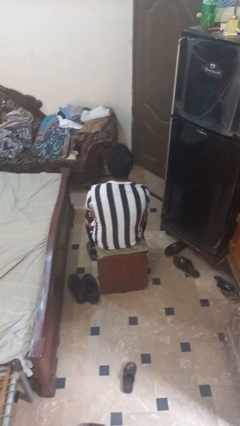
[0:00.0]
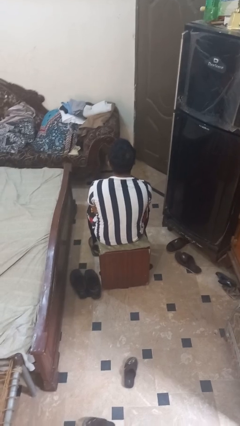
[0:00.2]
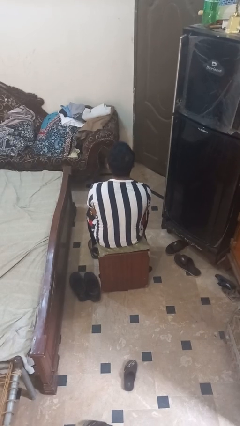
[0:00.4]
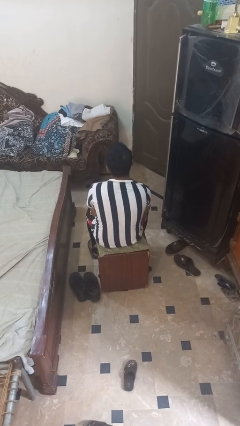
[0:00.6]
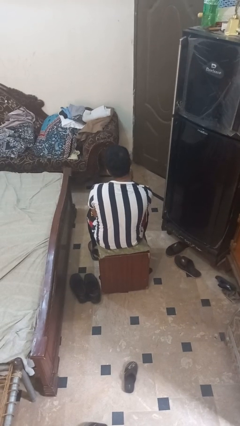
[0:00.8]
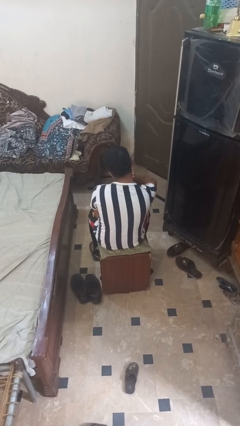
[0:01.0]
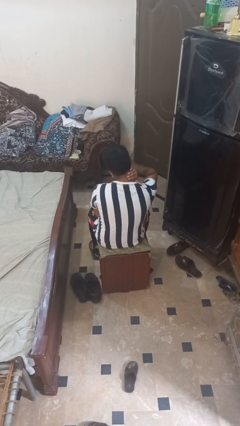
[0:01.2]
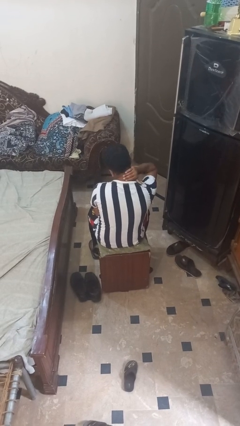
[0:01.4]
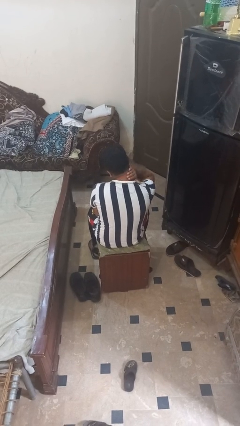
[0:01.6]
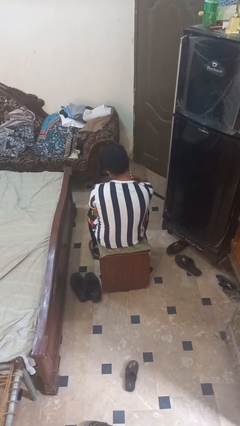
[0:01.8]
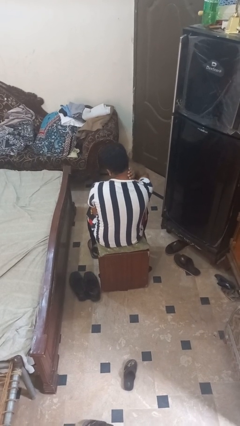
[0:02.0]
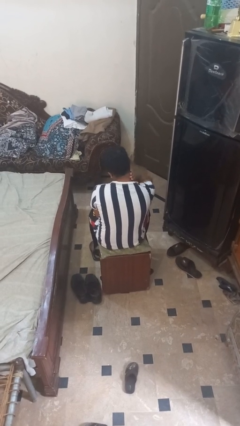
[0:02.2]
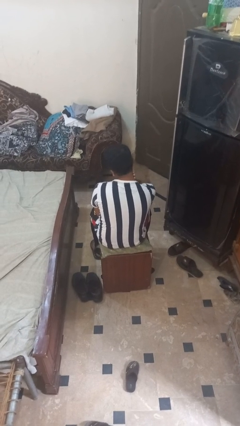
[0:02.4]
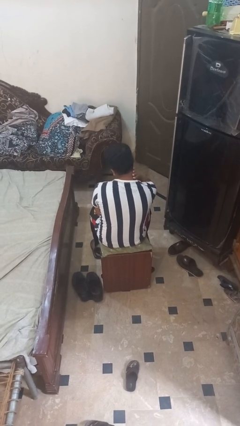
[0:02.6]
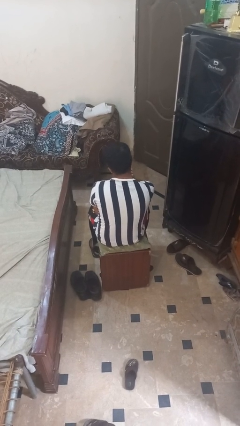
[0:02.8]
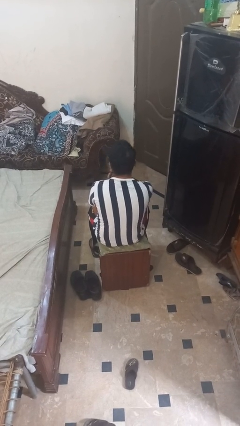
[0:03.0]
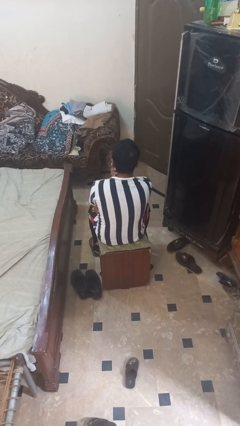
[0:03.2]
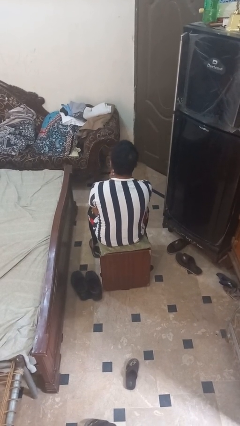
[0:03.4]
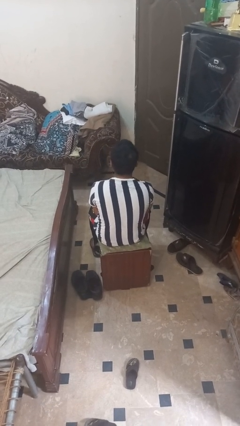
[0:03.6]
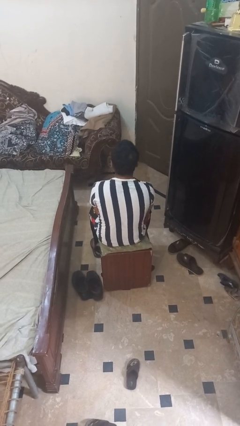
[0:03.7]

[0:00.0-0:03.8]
person rubs neck

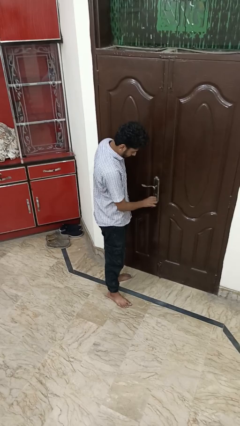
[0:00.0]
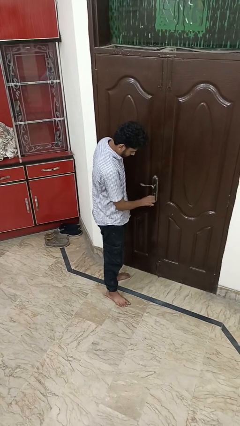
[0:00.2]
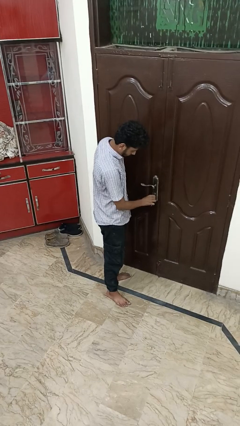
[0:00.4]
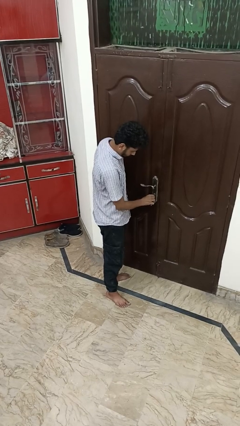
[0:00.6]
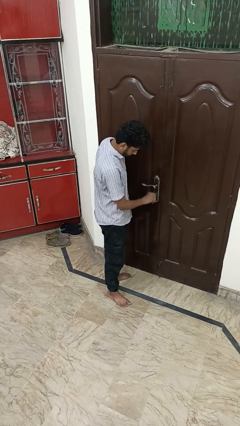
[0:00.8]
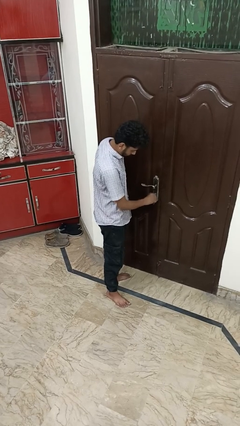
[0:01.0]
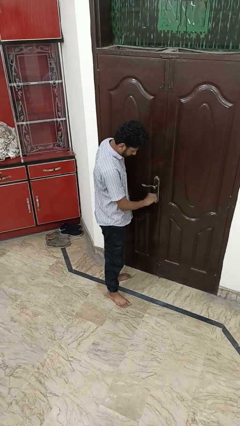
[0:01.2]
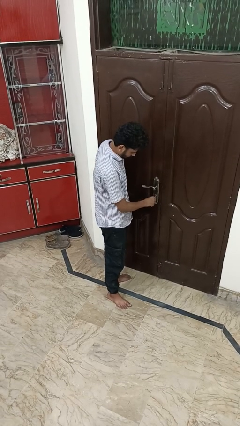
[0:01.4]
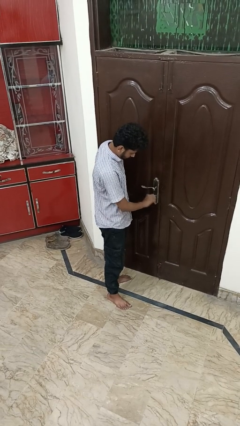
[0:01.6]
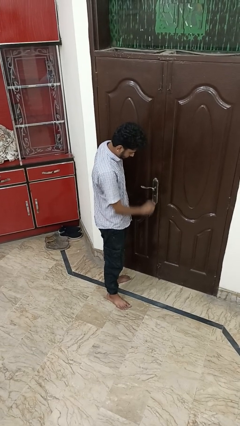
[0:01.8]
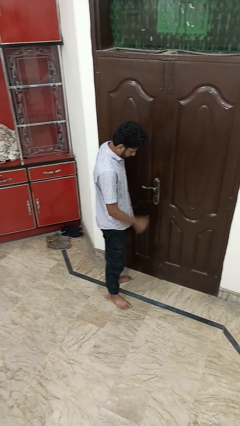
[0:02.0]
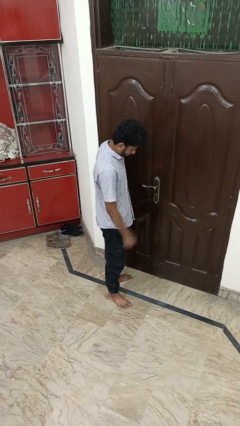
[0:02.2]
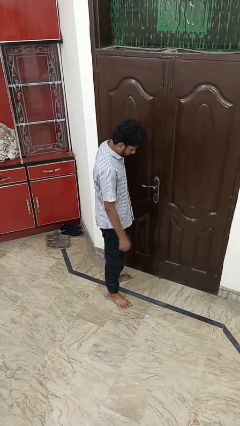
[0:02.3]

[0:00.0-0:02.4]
person unlocks door with keys

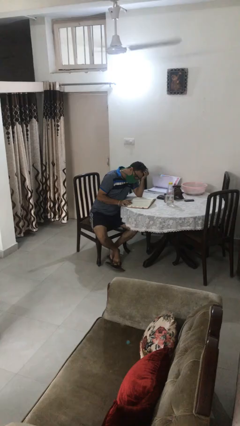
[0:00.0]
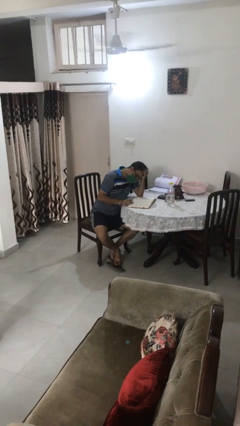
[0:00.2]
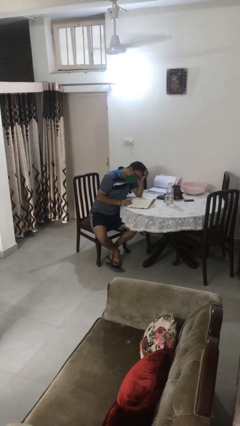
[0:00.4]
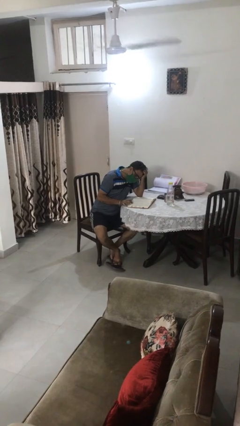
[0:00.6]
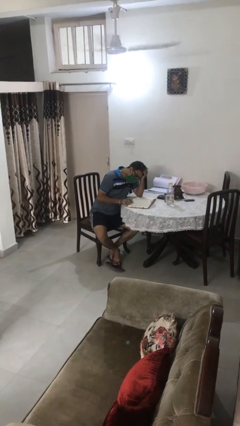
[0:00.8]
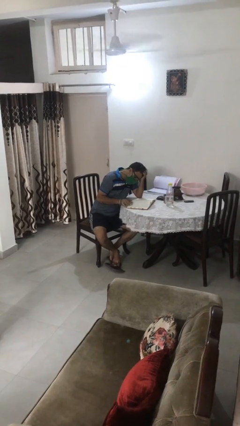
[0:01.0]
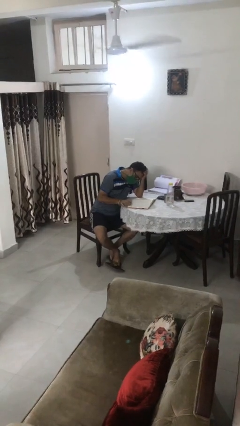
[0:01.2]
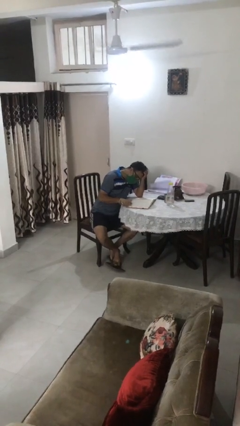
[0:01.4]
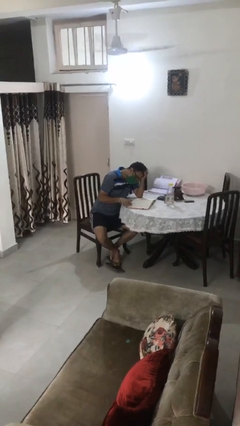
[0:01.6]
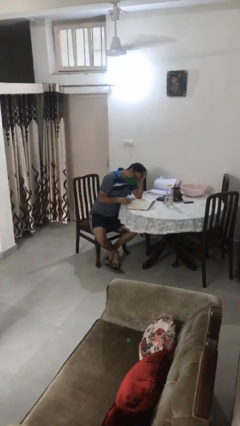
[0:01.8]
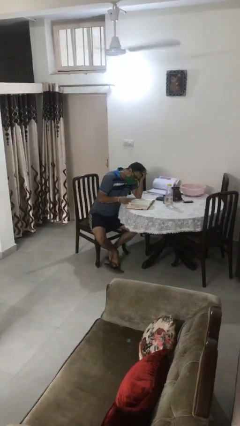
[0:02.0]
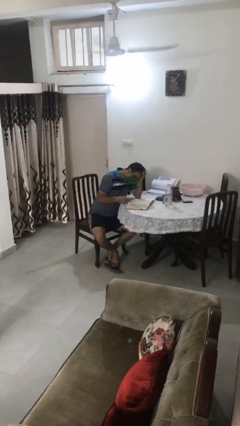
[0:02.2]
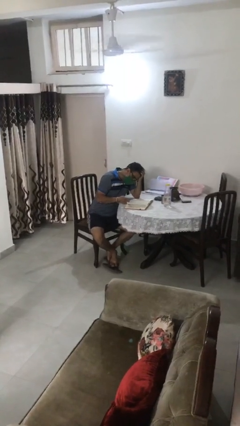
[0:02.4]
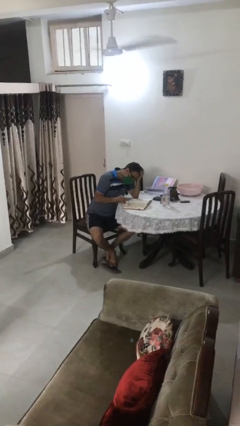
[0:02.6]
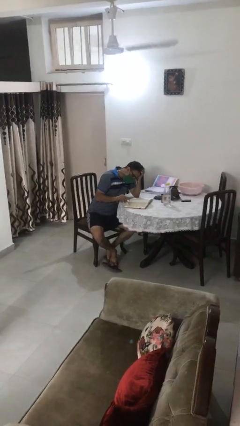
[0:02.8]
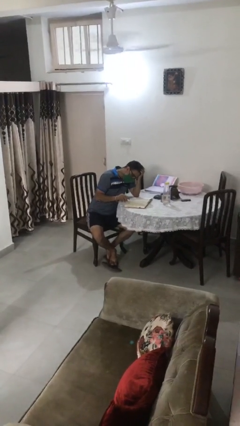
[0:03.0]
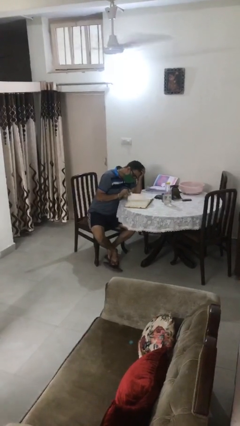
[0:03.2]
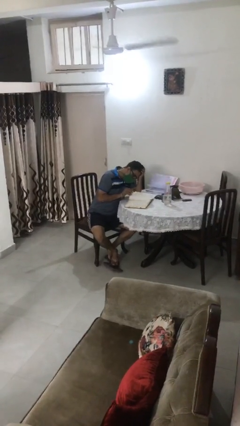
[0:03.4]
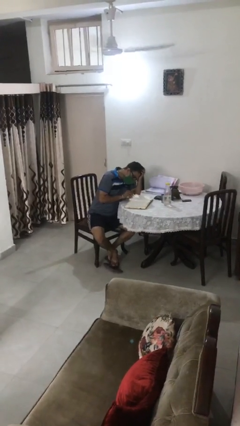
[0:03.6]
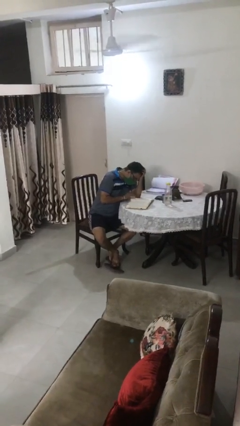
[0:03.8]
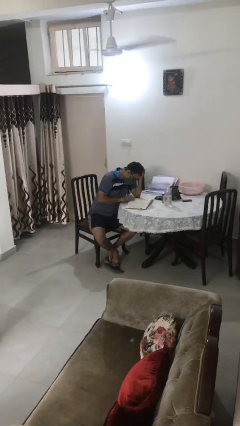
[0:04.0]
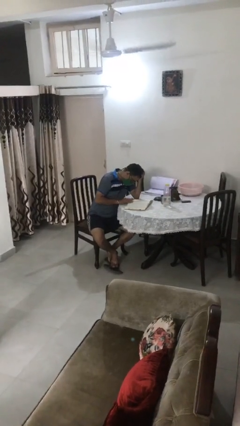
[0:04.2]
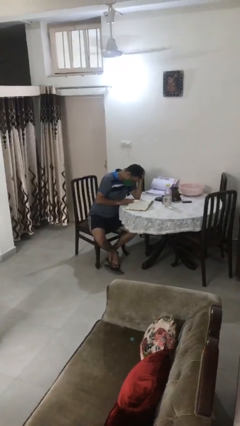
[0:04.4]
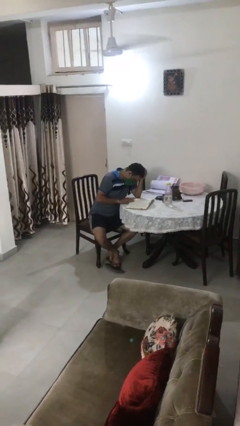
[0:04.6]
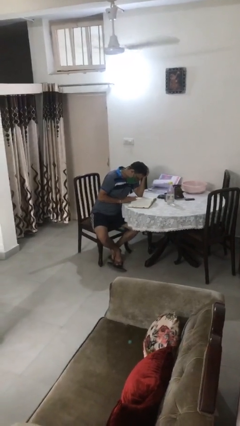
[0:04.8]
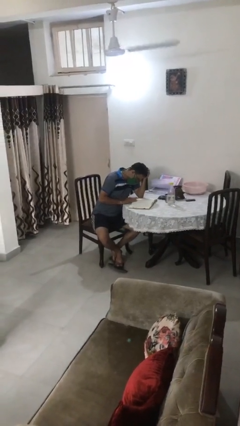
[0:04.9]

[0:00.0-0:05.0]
person reads document

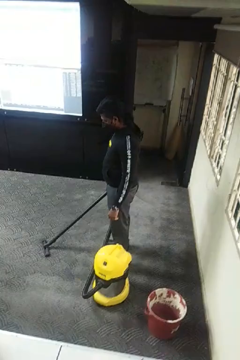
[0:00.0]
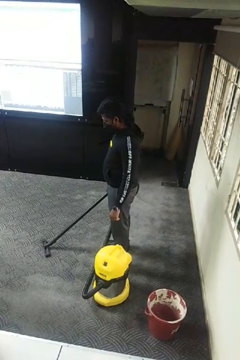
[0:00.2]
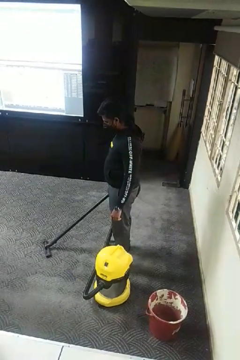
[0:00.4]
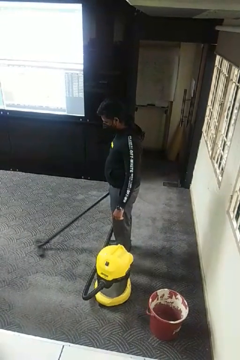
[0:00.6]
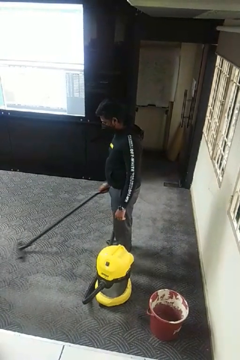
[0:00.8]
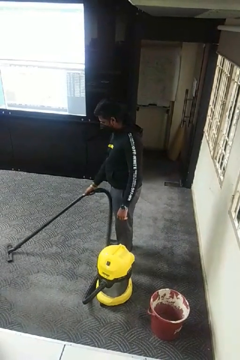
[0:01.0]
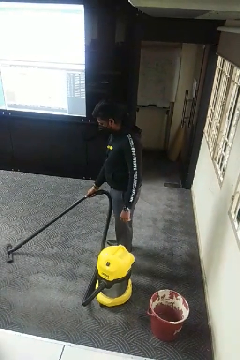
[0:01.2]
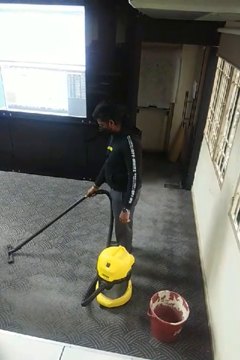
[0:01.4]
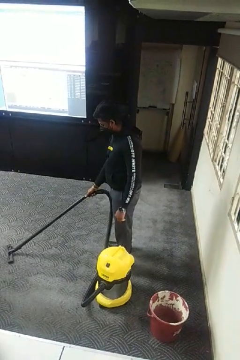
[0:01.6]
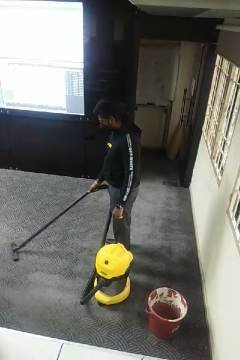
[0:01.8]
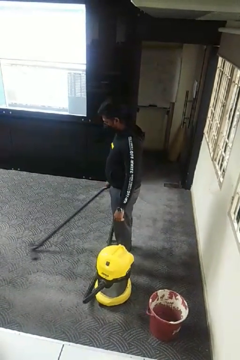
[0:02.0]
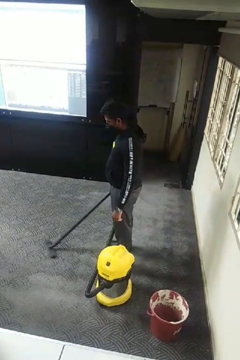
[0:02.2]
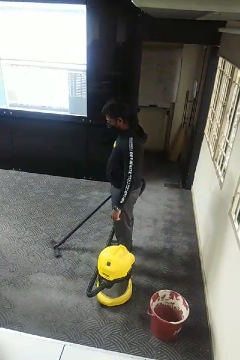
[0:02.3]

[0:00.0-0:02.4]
person vacuums carpet

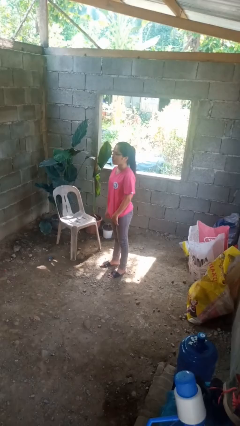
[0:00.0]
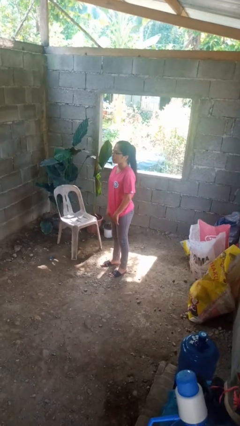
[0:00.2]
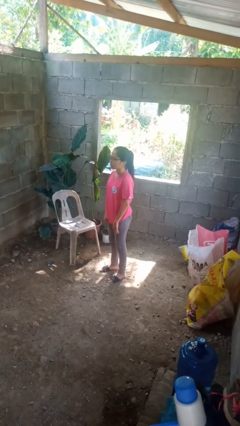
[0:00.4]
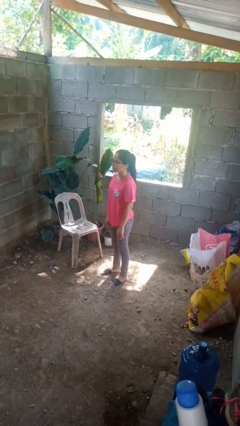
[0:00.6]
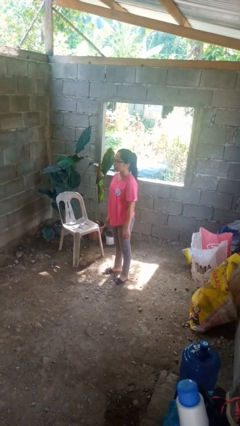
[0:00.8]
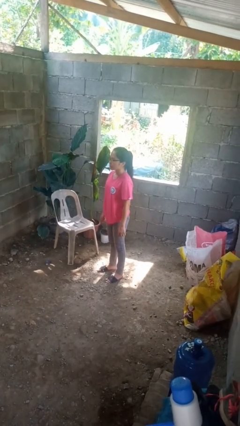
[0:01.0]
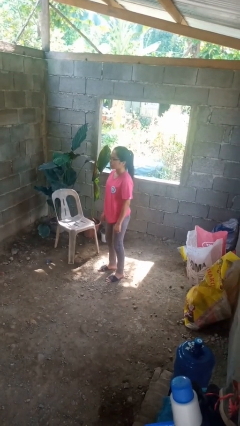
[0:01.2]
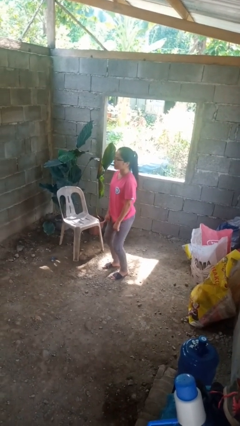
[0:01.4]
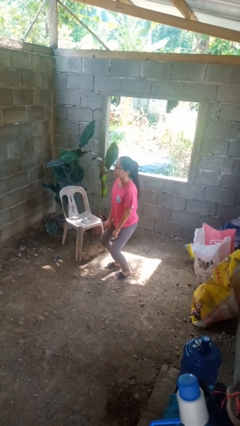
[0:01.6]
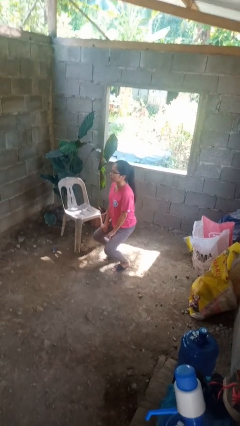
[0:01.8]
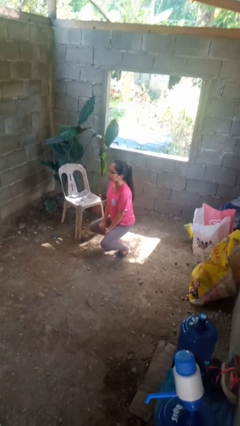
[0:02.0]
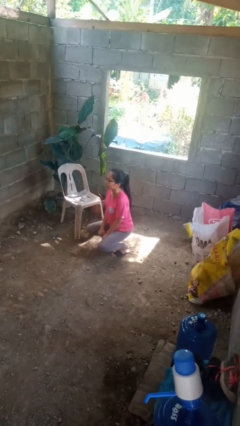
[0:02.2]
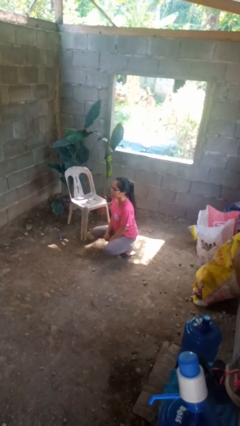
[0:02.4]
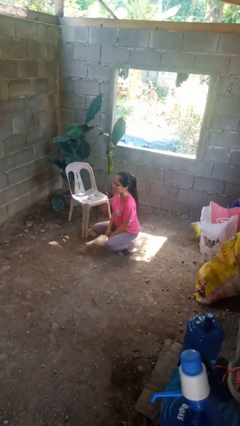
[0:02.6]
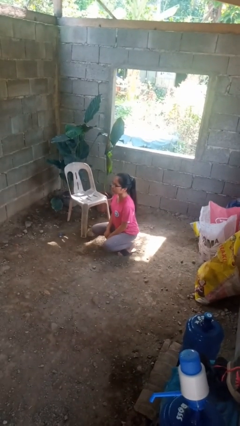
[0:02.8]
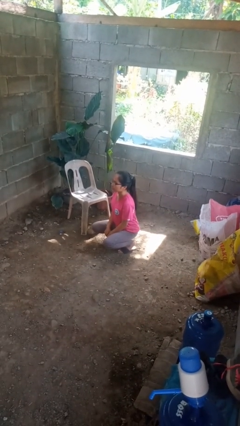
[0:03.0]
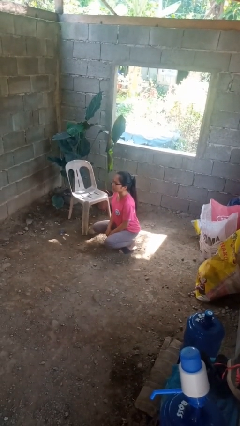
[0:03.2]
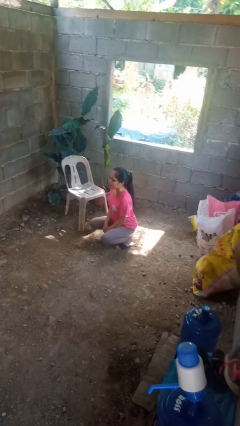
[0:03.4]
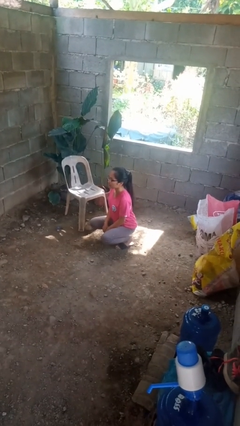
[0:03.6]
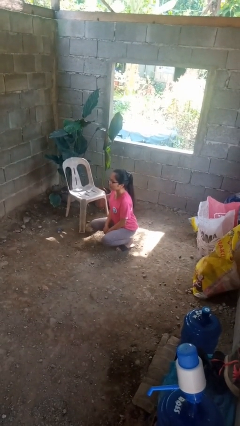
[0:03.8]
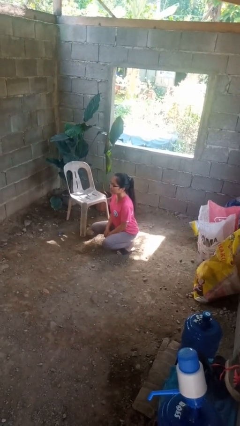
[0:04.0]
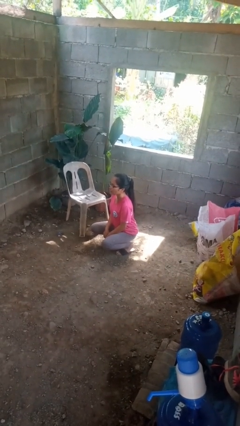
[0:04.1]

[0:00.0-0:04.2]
person squats

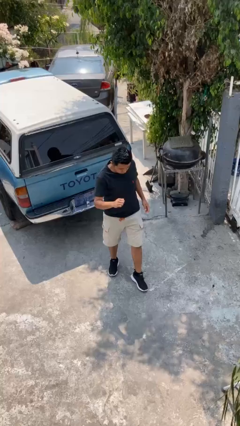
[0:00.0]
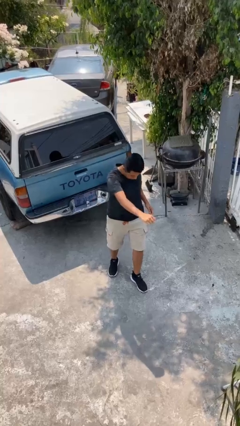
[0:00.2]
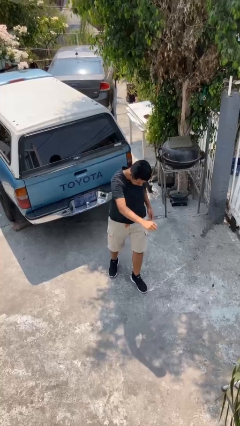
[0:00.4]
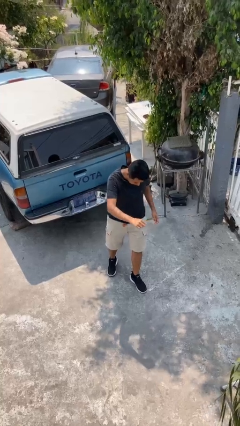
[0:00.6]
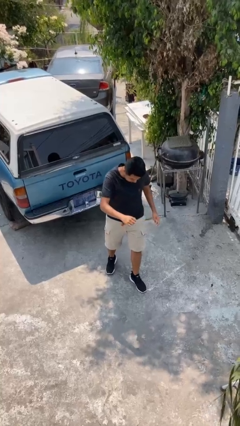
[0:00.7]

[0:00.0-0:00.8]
person karate chop
